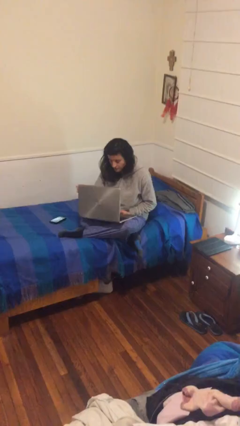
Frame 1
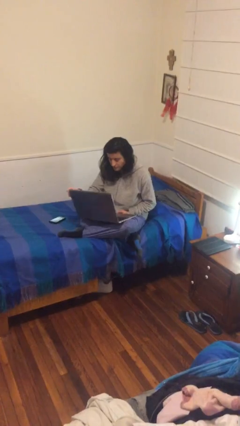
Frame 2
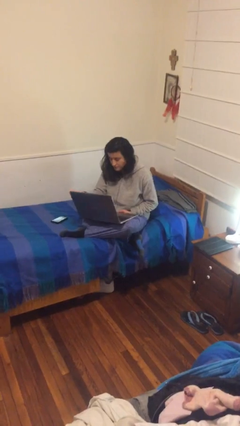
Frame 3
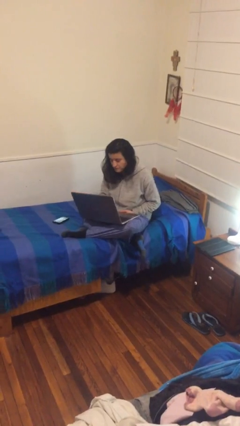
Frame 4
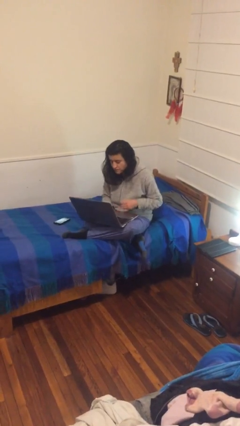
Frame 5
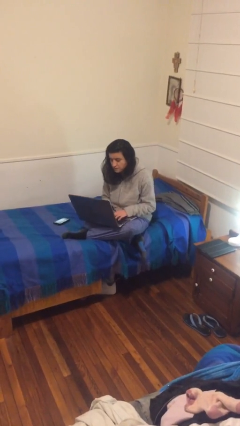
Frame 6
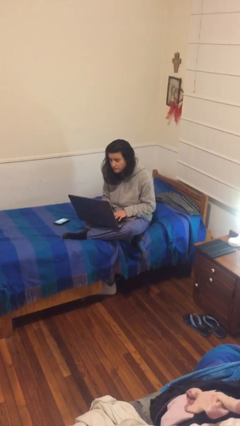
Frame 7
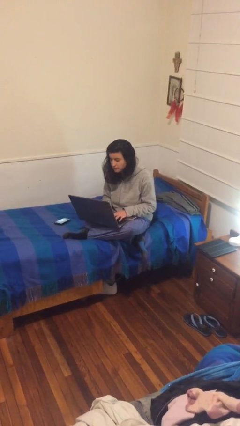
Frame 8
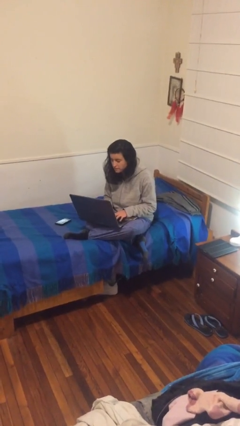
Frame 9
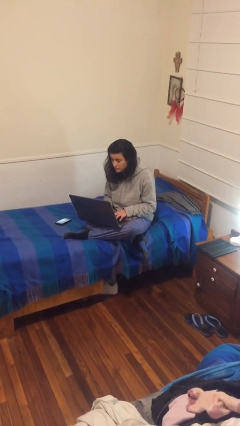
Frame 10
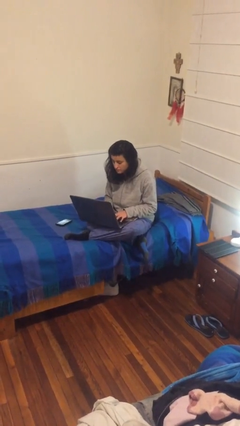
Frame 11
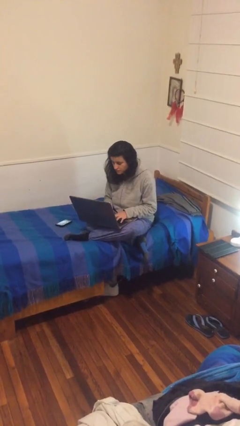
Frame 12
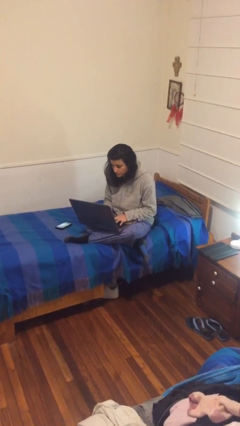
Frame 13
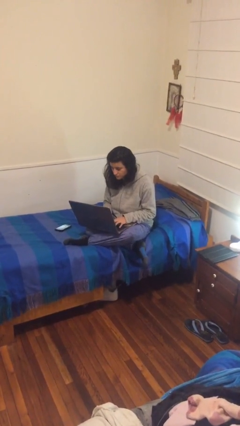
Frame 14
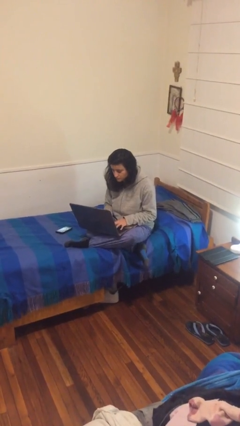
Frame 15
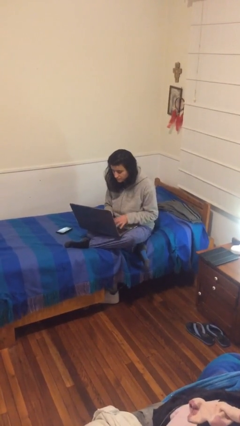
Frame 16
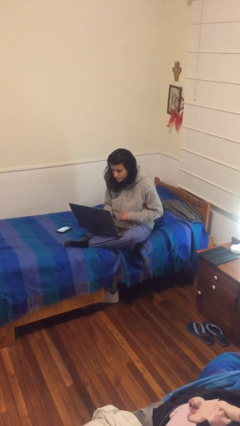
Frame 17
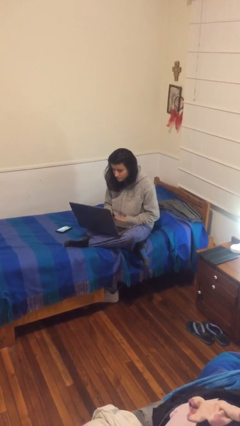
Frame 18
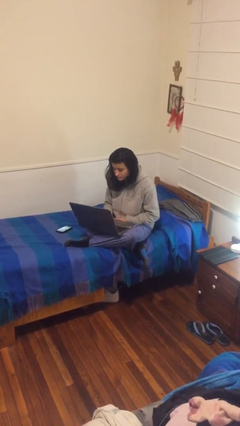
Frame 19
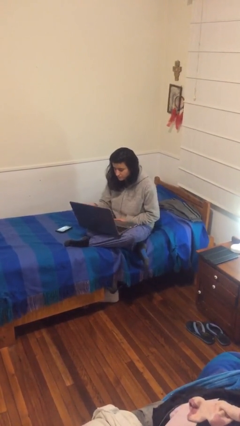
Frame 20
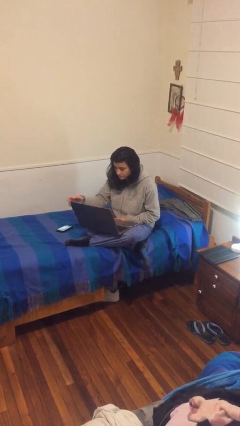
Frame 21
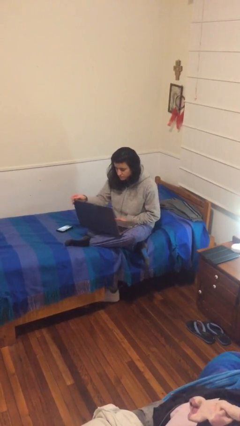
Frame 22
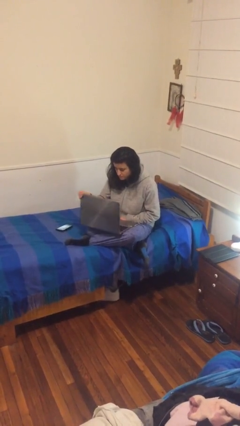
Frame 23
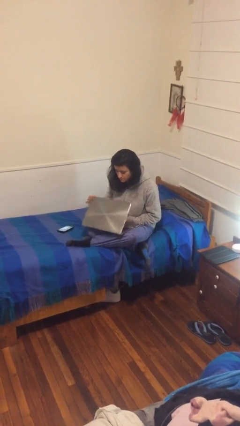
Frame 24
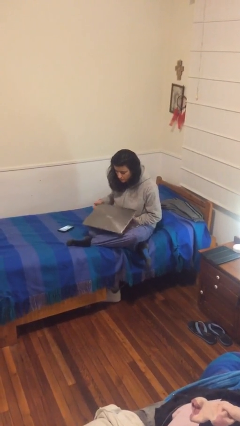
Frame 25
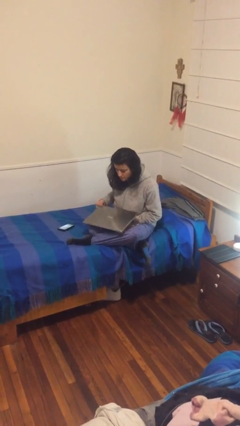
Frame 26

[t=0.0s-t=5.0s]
person interacts with laptop

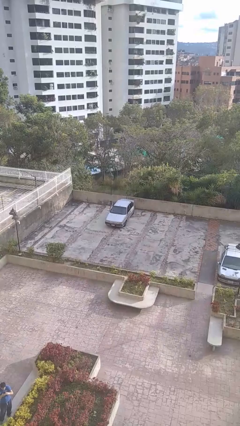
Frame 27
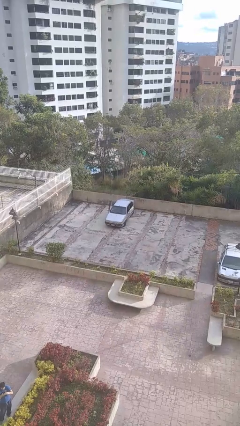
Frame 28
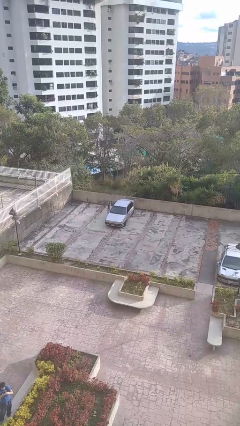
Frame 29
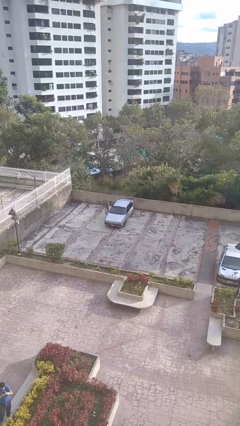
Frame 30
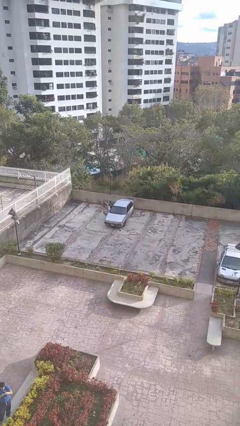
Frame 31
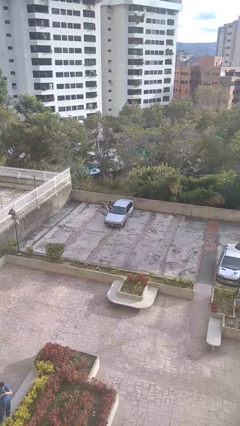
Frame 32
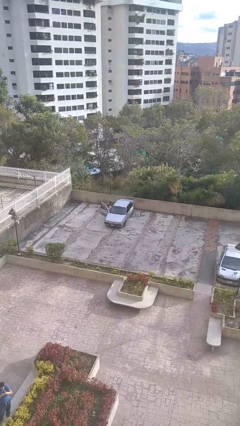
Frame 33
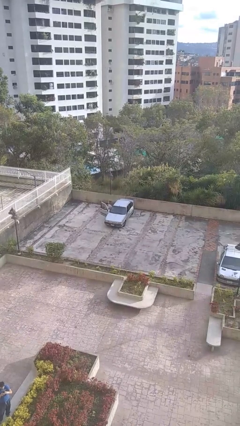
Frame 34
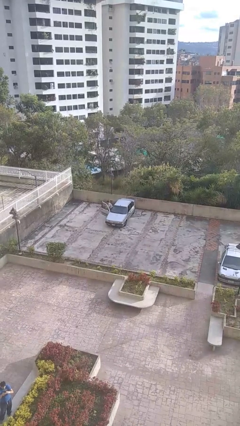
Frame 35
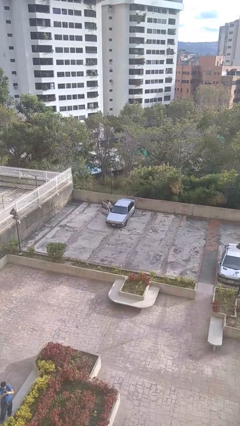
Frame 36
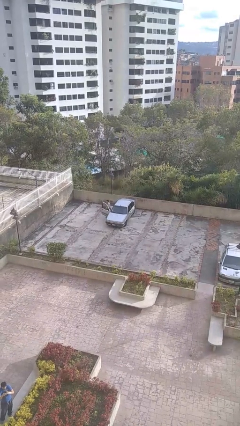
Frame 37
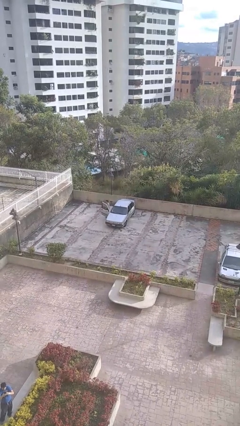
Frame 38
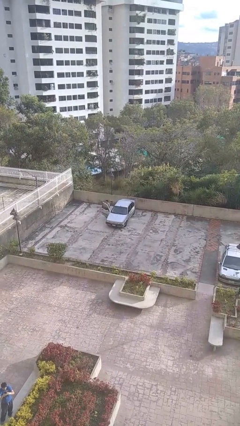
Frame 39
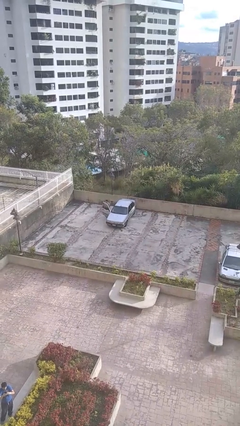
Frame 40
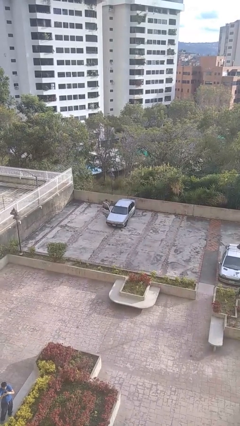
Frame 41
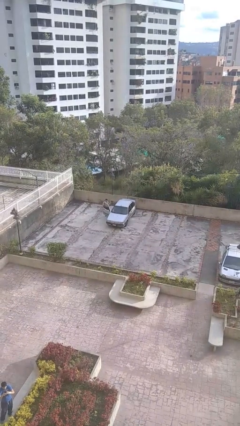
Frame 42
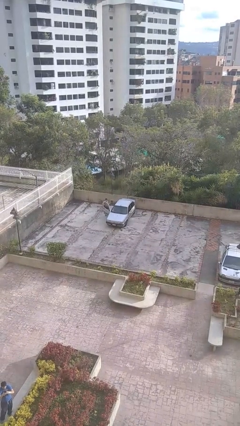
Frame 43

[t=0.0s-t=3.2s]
car drops off person

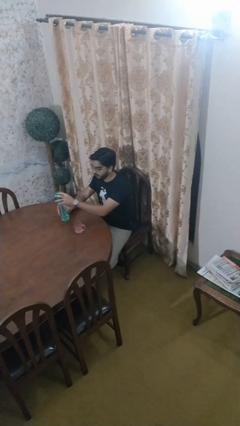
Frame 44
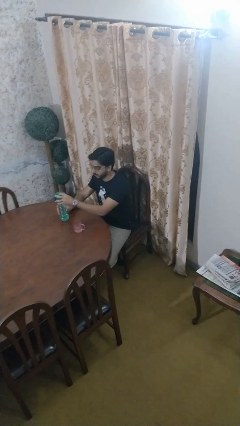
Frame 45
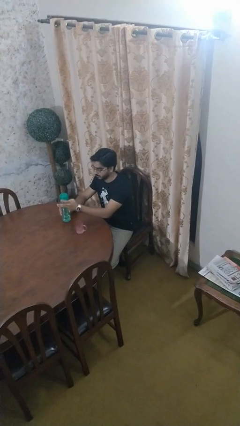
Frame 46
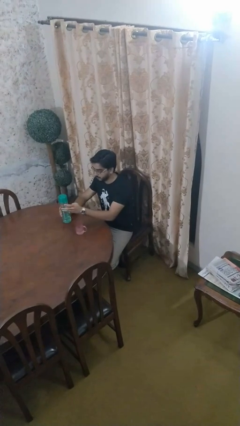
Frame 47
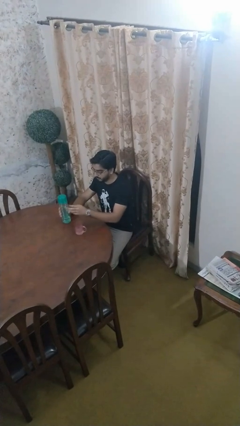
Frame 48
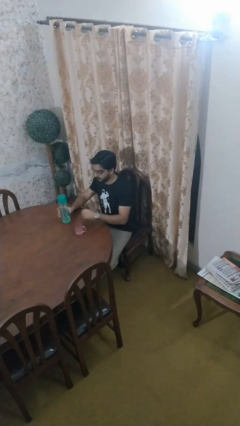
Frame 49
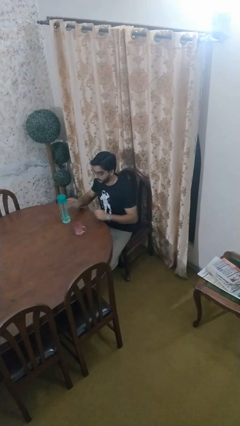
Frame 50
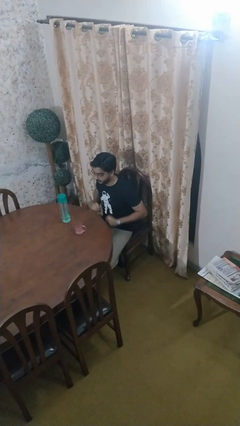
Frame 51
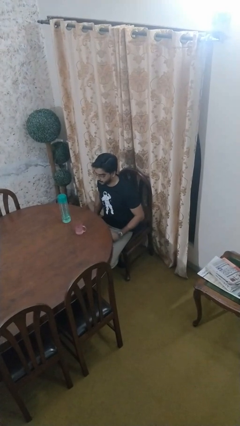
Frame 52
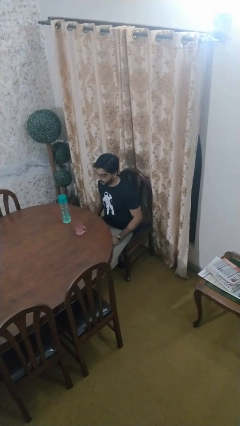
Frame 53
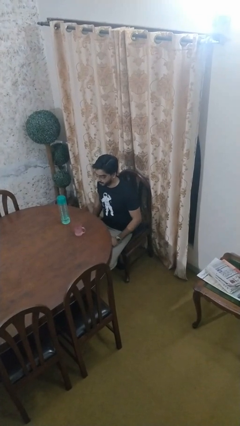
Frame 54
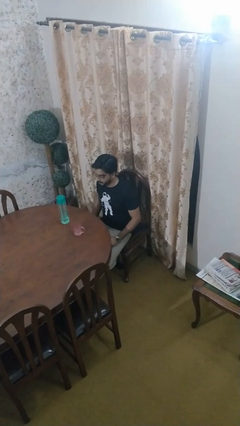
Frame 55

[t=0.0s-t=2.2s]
person screws lid to bottle

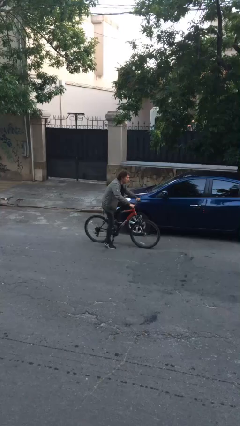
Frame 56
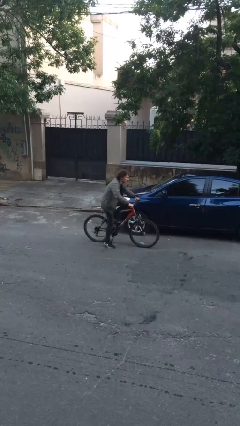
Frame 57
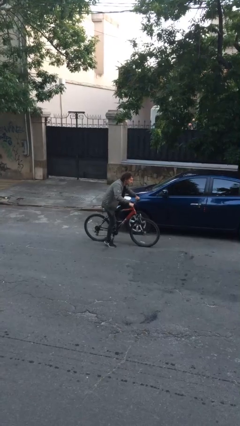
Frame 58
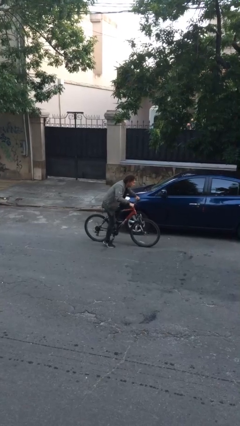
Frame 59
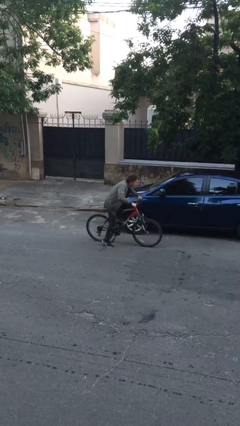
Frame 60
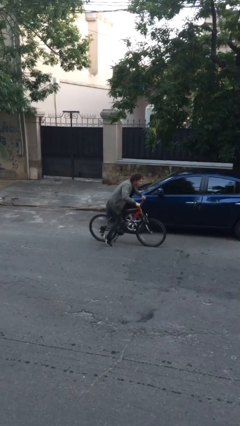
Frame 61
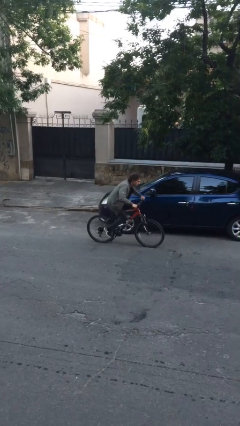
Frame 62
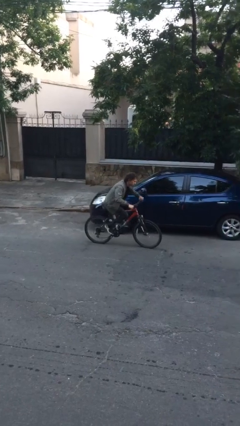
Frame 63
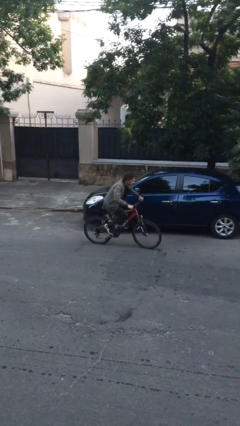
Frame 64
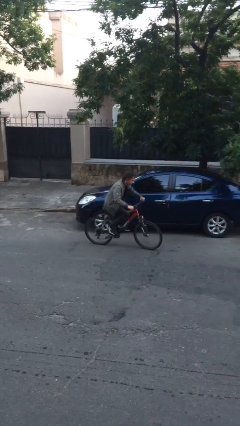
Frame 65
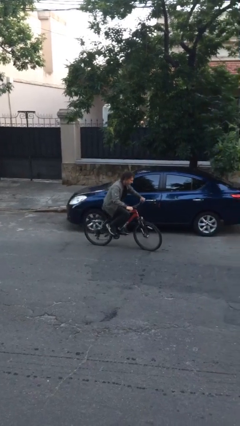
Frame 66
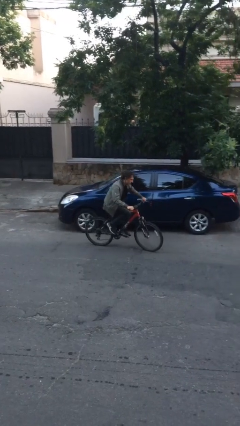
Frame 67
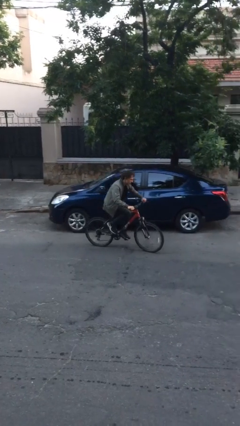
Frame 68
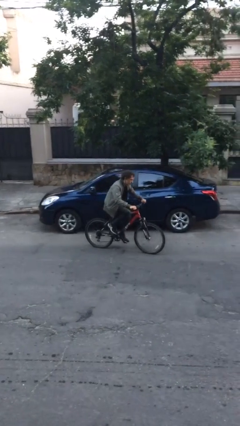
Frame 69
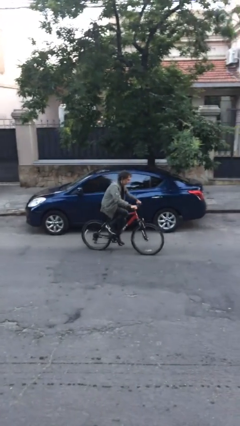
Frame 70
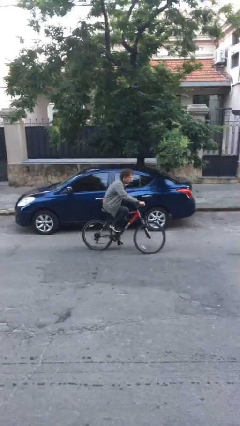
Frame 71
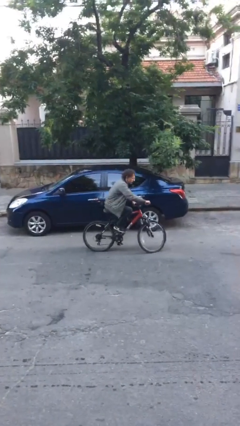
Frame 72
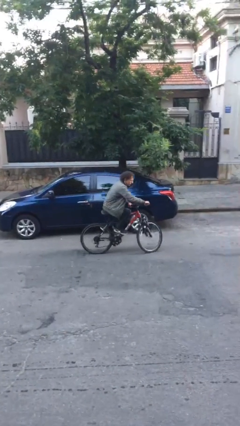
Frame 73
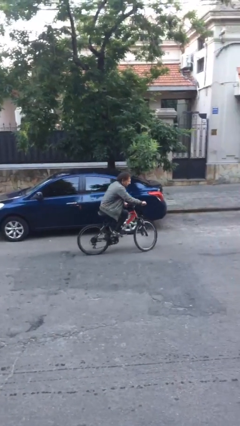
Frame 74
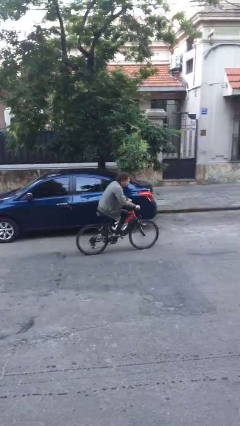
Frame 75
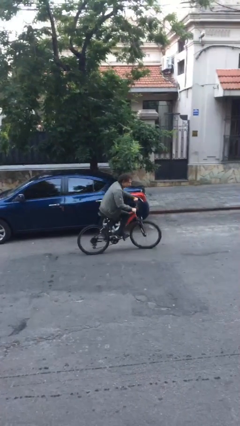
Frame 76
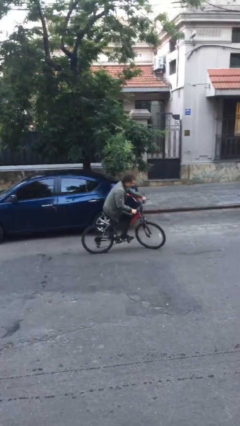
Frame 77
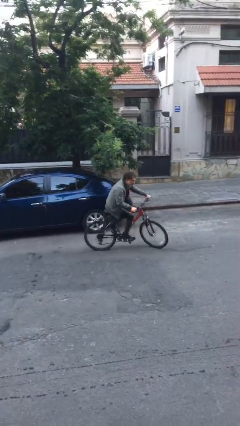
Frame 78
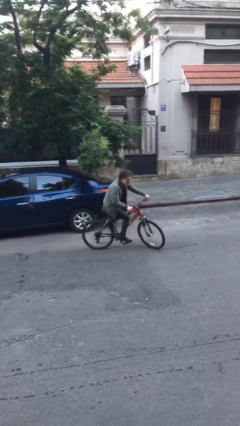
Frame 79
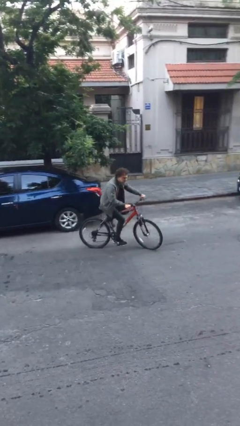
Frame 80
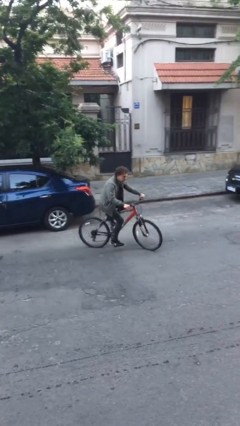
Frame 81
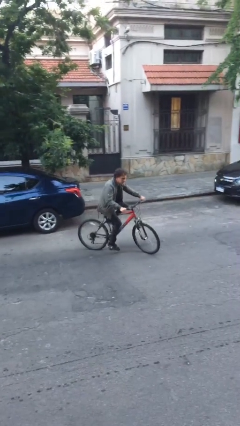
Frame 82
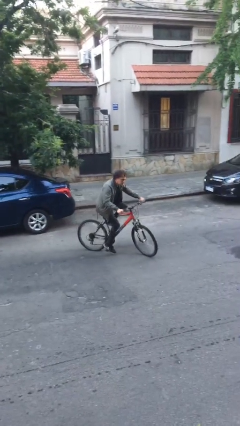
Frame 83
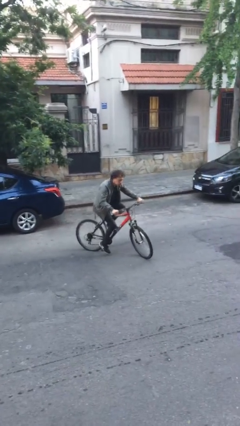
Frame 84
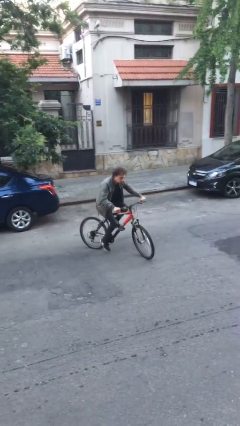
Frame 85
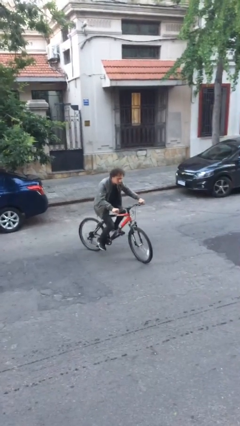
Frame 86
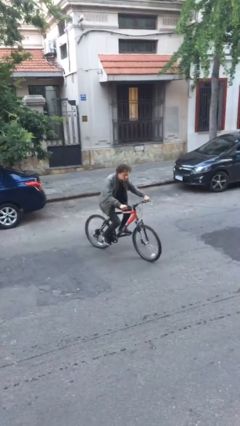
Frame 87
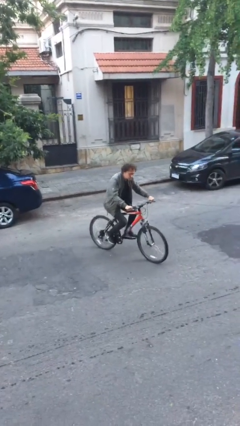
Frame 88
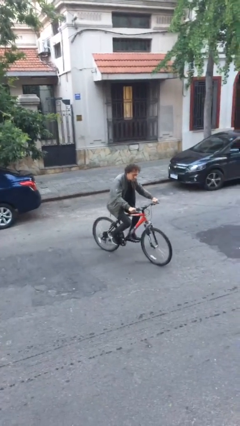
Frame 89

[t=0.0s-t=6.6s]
person rides bicycle

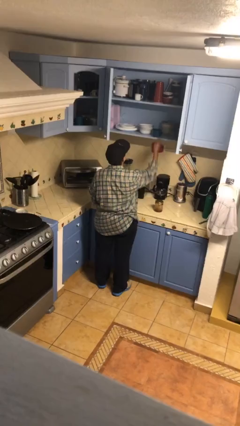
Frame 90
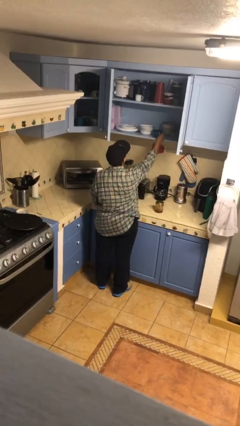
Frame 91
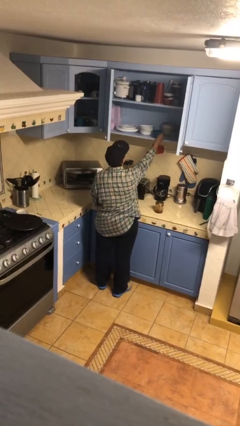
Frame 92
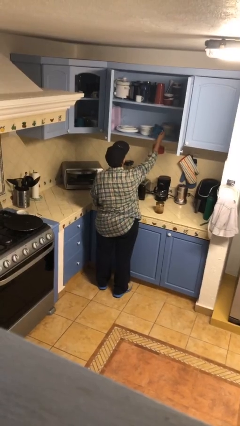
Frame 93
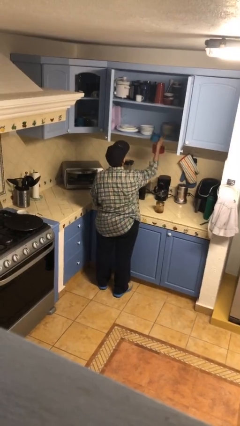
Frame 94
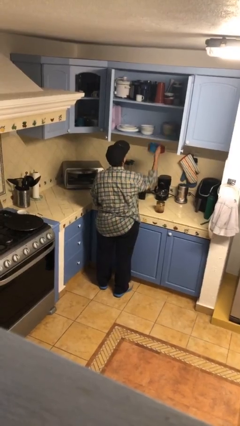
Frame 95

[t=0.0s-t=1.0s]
person picks up object from cabinet
